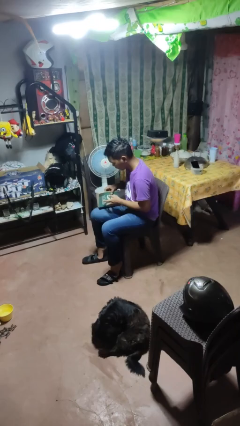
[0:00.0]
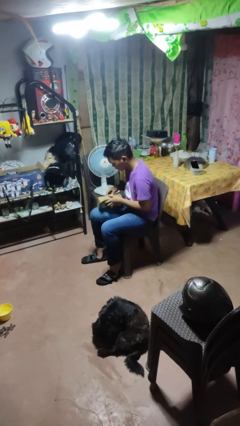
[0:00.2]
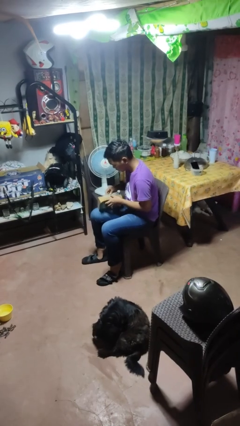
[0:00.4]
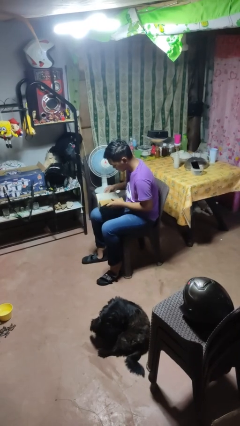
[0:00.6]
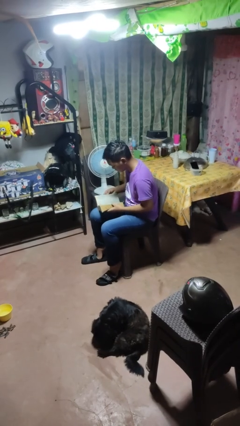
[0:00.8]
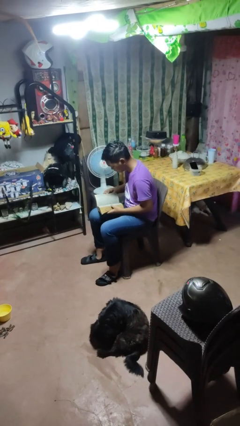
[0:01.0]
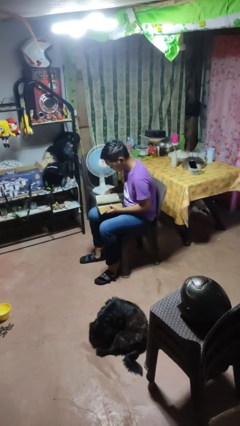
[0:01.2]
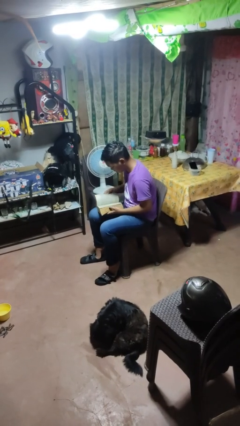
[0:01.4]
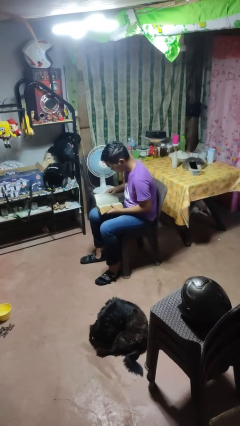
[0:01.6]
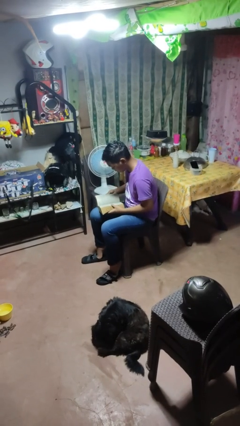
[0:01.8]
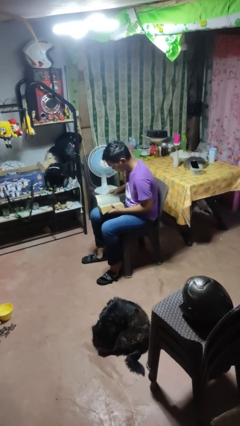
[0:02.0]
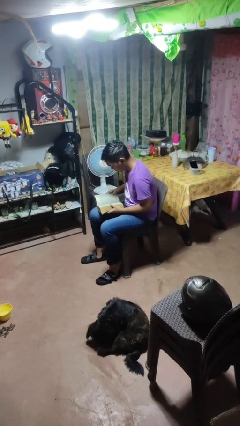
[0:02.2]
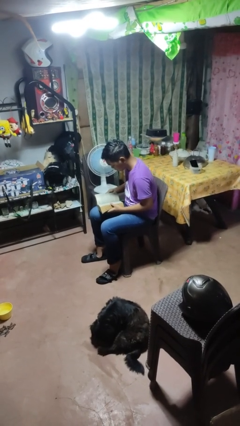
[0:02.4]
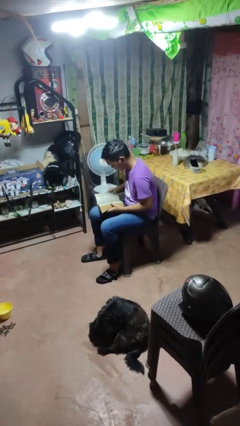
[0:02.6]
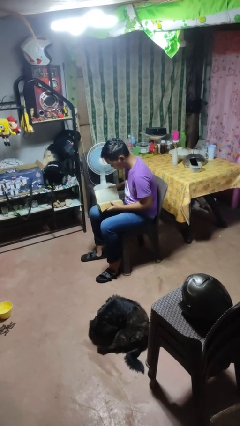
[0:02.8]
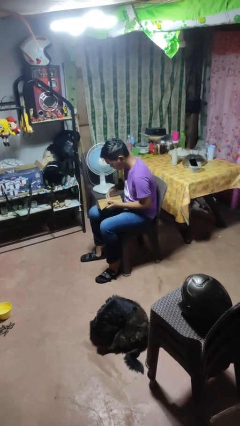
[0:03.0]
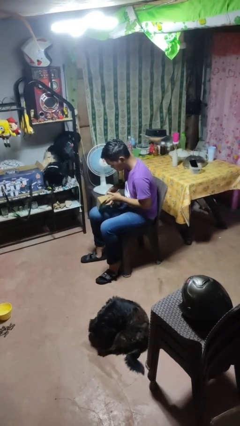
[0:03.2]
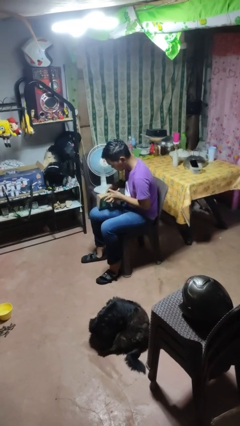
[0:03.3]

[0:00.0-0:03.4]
person reads book

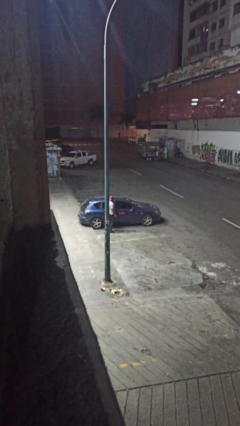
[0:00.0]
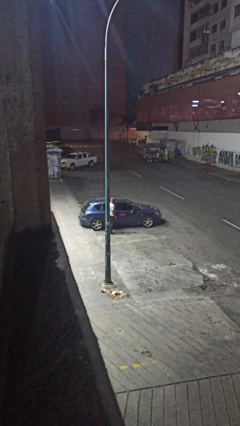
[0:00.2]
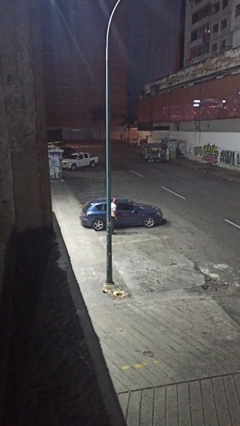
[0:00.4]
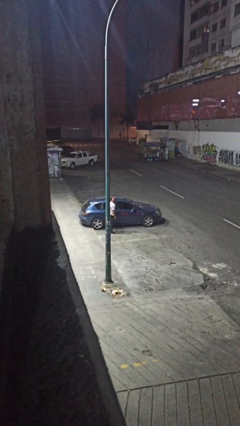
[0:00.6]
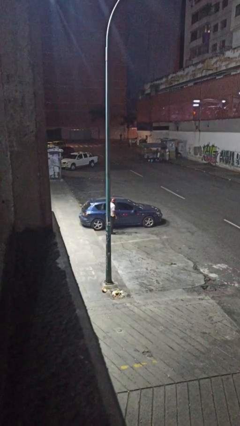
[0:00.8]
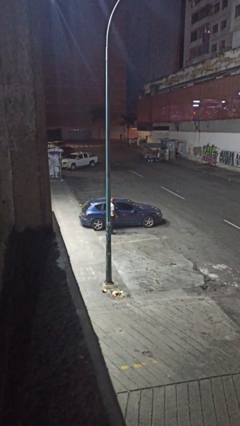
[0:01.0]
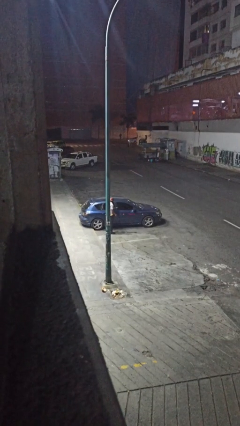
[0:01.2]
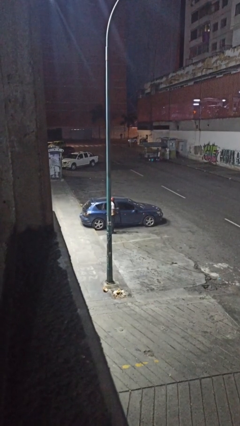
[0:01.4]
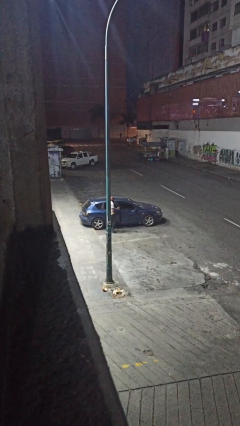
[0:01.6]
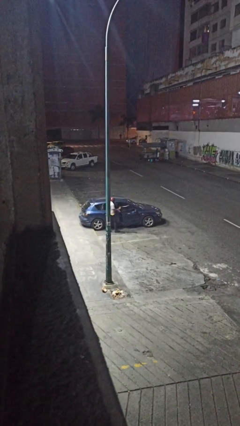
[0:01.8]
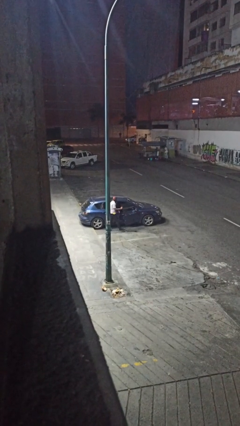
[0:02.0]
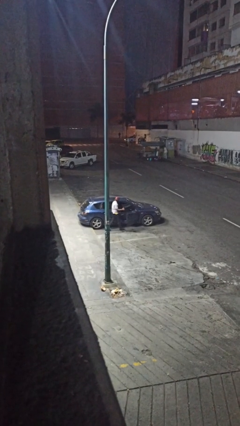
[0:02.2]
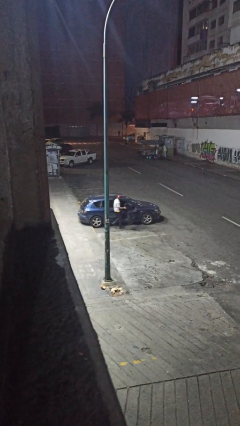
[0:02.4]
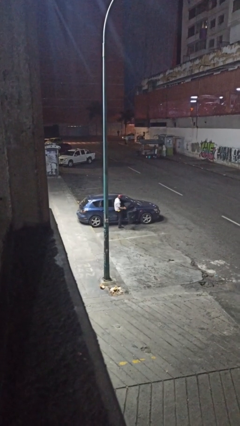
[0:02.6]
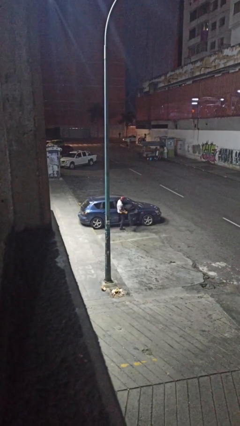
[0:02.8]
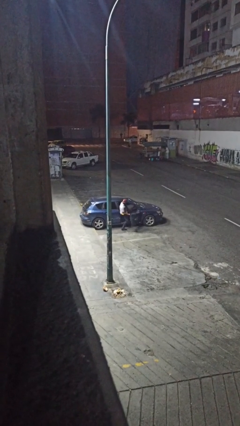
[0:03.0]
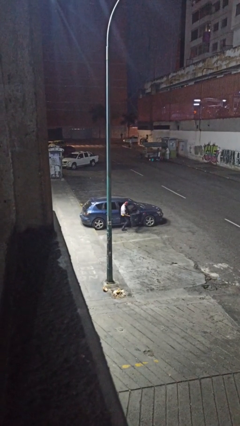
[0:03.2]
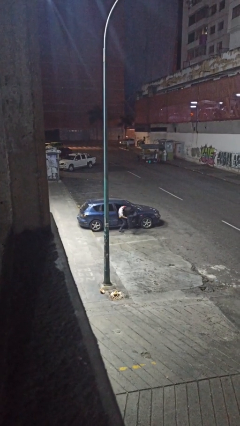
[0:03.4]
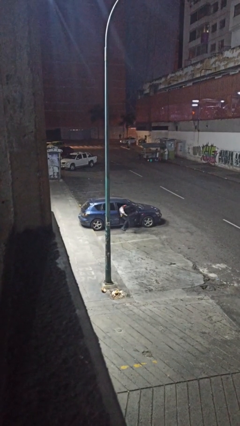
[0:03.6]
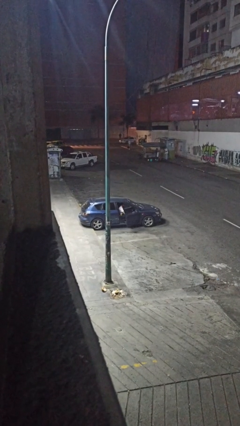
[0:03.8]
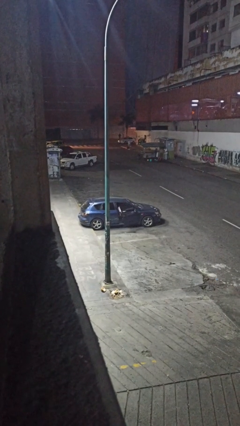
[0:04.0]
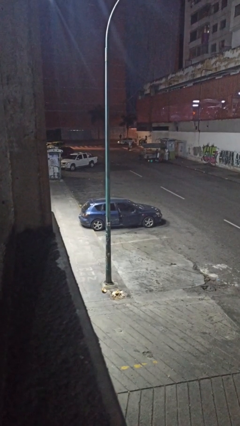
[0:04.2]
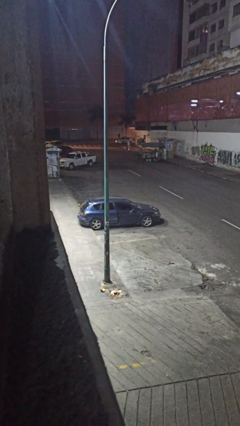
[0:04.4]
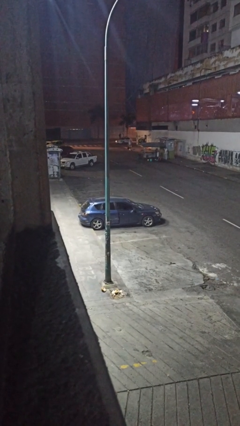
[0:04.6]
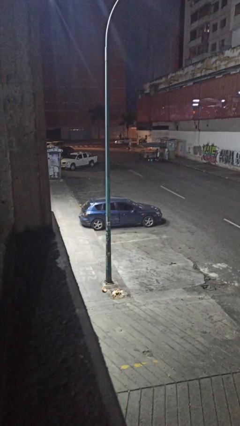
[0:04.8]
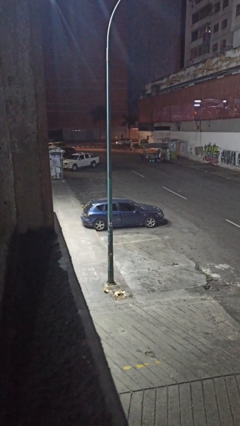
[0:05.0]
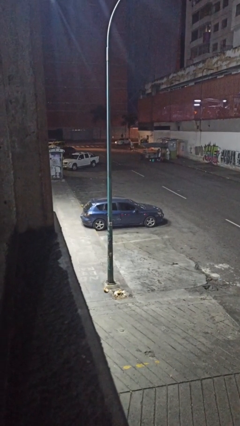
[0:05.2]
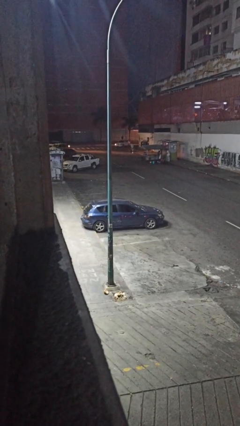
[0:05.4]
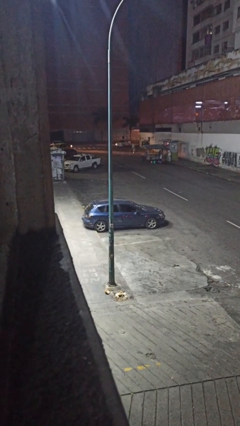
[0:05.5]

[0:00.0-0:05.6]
car picks up person

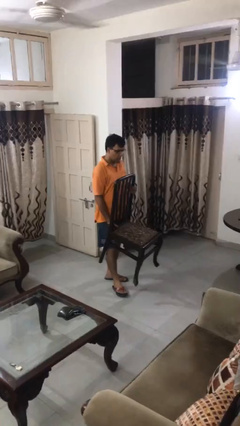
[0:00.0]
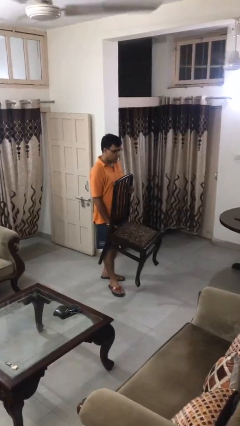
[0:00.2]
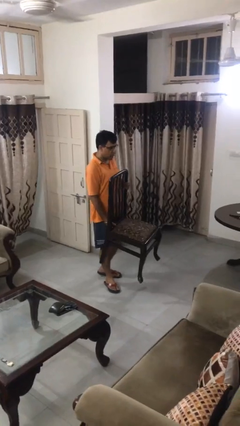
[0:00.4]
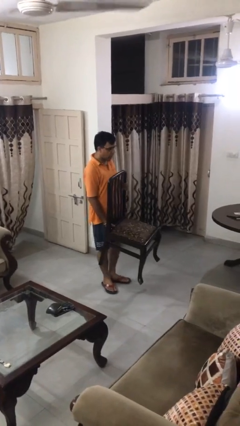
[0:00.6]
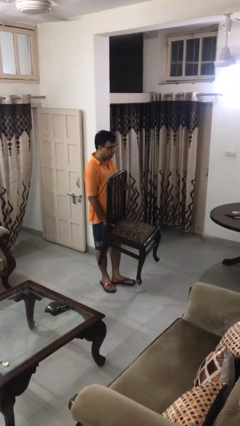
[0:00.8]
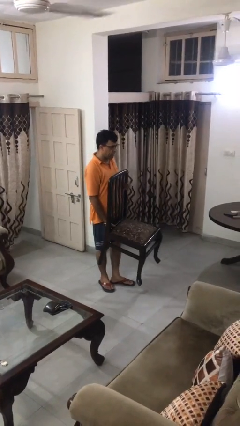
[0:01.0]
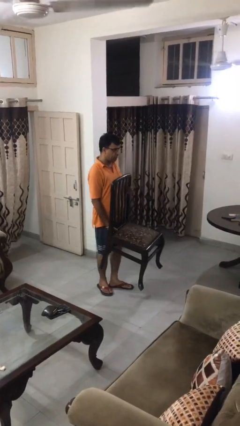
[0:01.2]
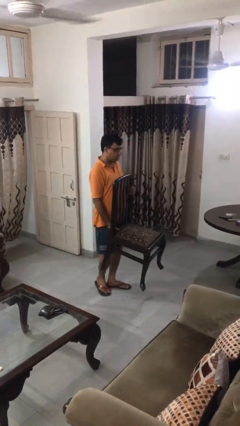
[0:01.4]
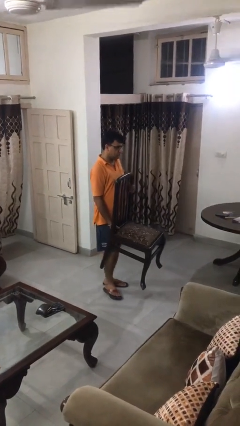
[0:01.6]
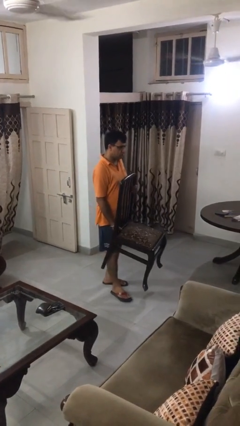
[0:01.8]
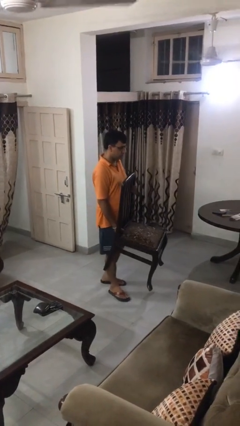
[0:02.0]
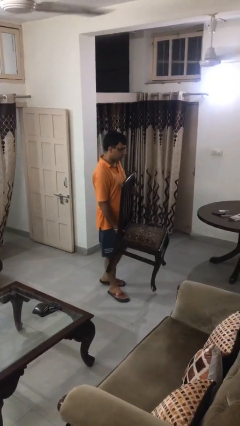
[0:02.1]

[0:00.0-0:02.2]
person carries furniture

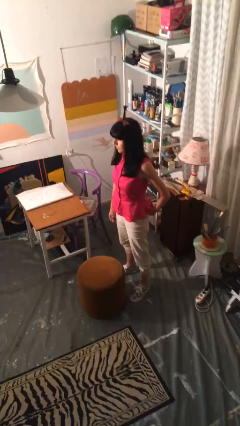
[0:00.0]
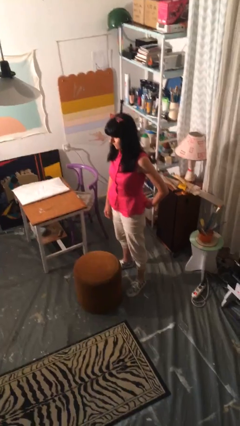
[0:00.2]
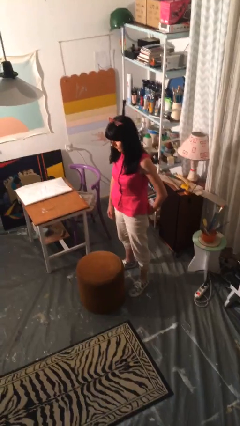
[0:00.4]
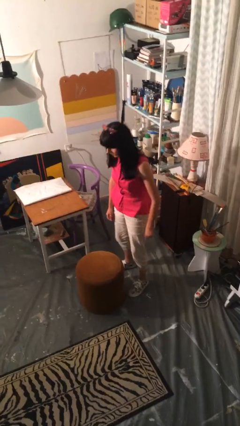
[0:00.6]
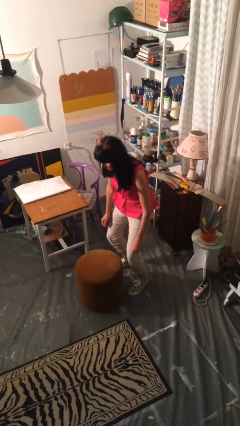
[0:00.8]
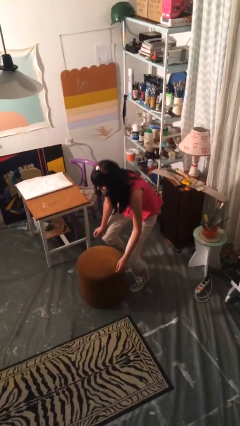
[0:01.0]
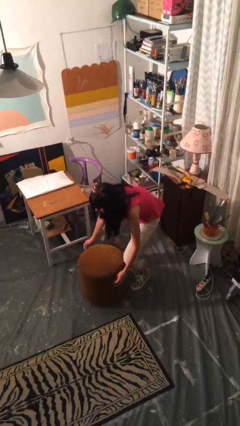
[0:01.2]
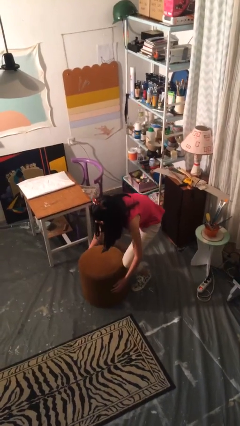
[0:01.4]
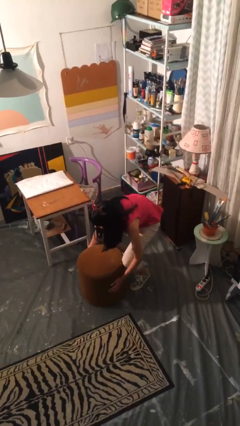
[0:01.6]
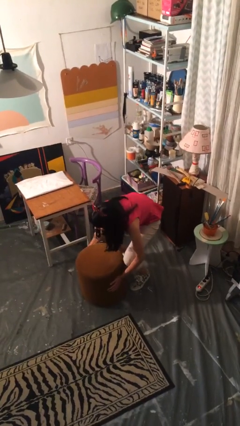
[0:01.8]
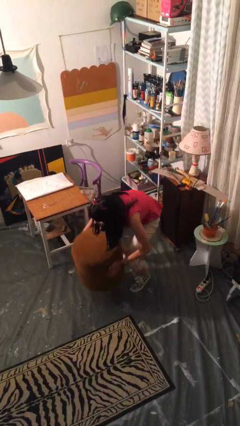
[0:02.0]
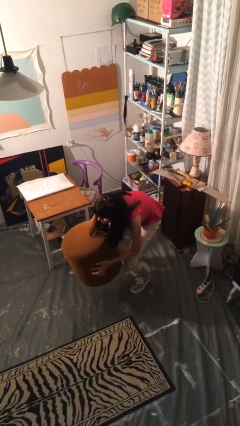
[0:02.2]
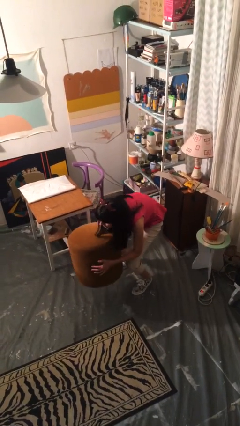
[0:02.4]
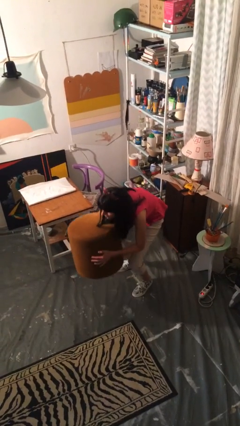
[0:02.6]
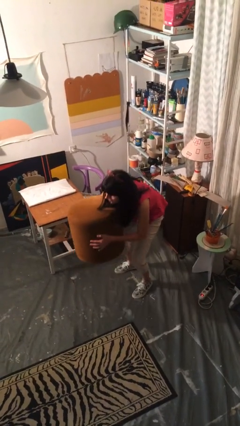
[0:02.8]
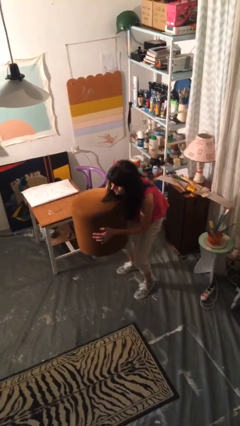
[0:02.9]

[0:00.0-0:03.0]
person picks up object from floor

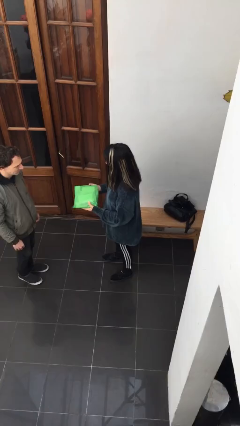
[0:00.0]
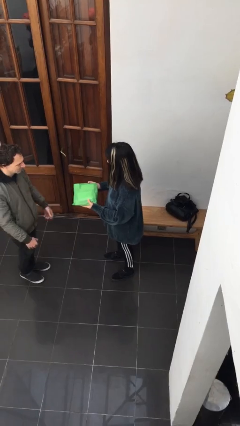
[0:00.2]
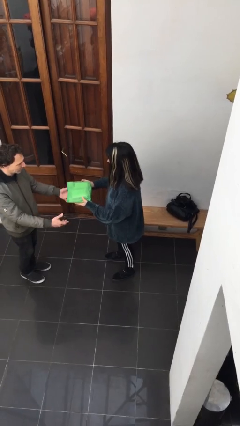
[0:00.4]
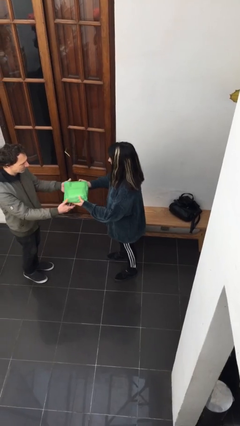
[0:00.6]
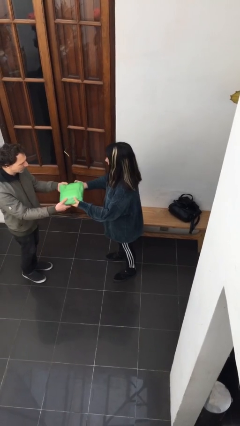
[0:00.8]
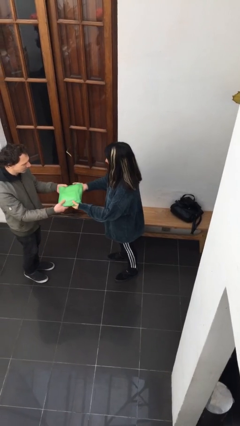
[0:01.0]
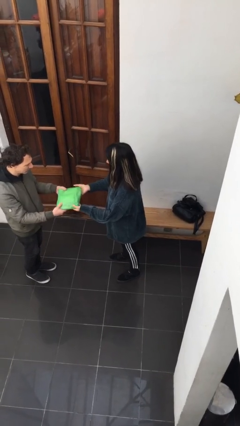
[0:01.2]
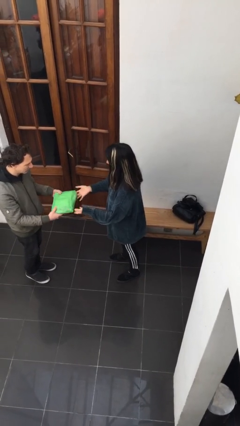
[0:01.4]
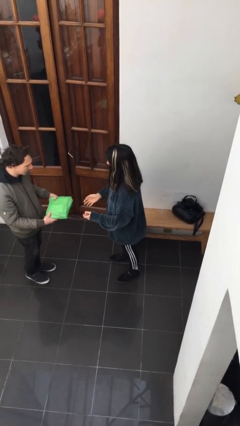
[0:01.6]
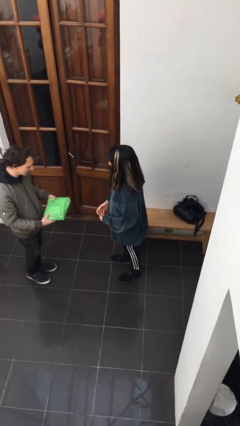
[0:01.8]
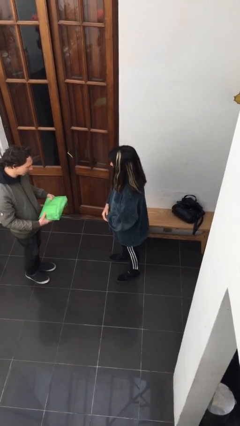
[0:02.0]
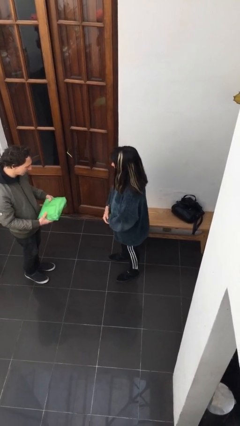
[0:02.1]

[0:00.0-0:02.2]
person transfers object to person

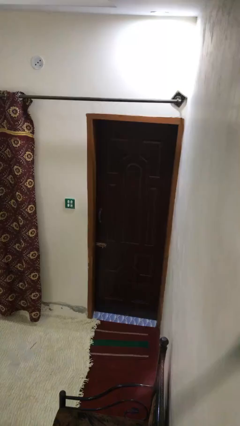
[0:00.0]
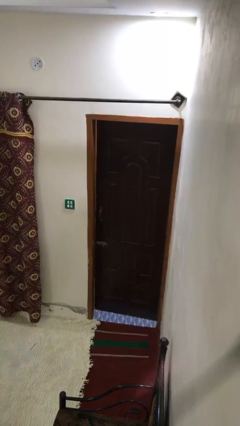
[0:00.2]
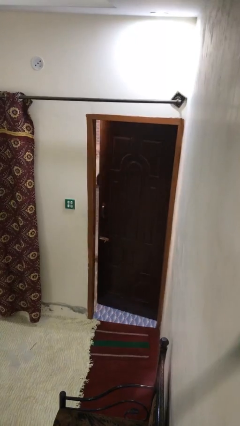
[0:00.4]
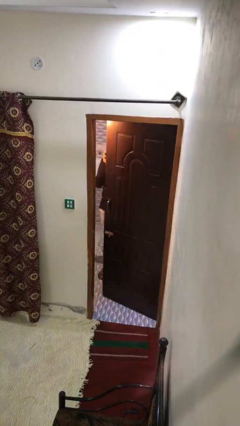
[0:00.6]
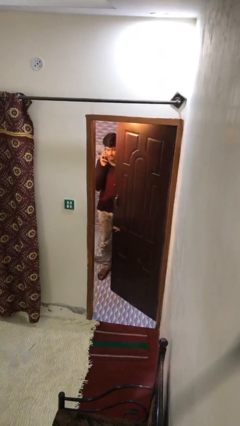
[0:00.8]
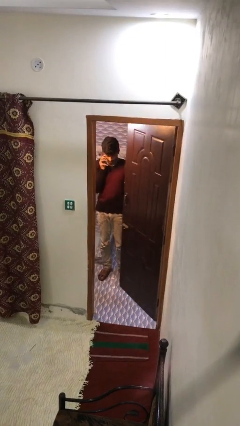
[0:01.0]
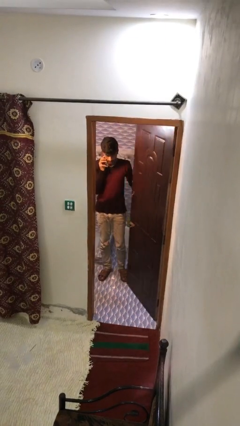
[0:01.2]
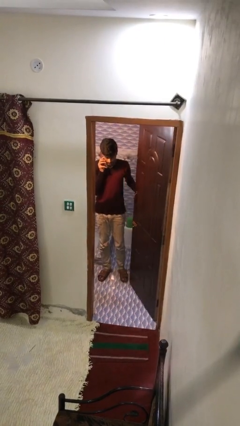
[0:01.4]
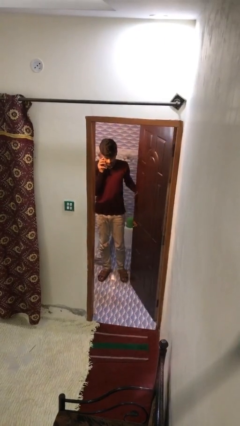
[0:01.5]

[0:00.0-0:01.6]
person opens facility door
